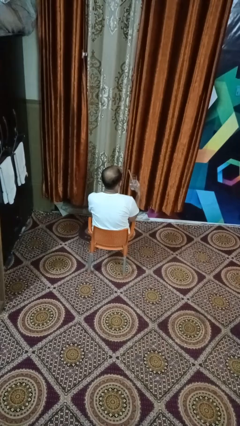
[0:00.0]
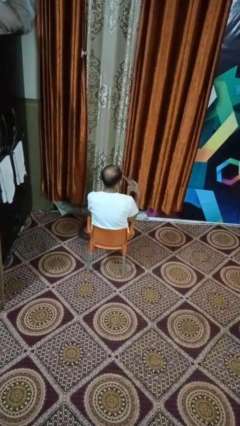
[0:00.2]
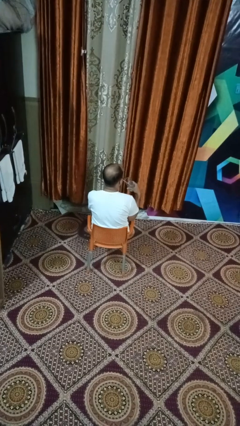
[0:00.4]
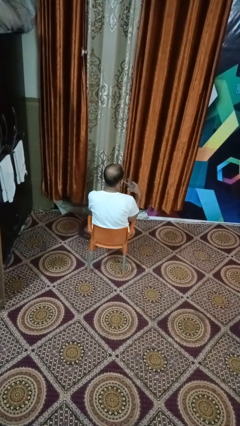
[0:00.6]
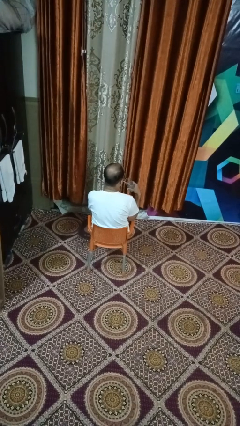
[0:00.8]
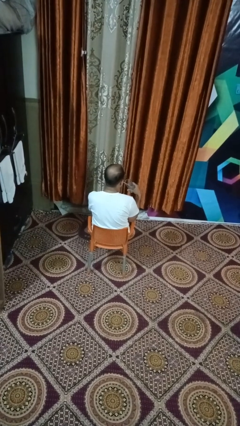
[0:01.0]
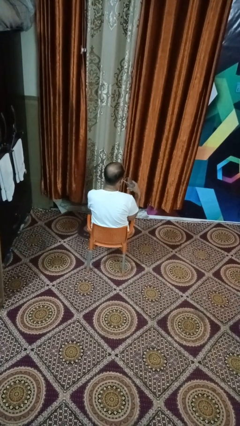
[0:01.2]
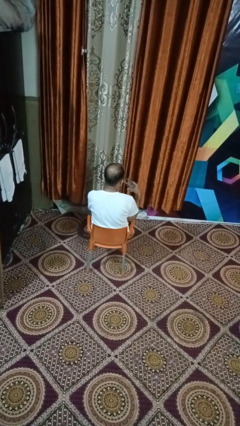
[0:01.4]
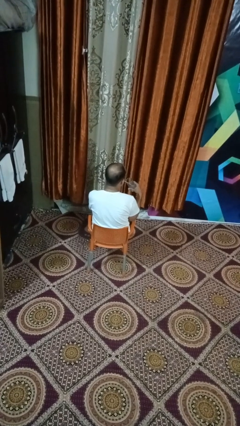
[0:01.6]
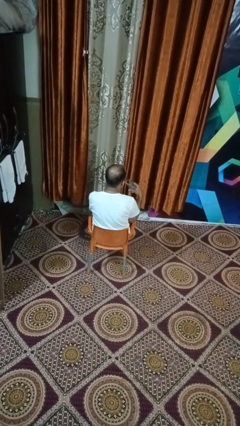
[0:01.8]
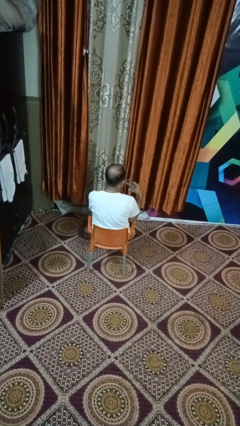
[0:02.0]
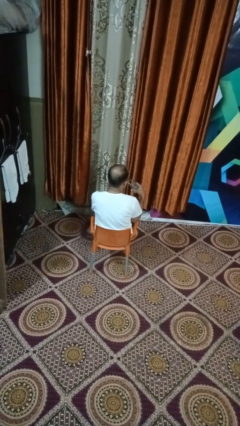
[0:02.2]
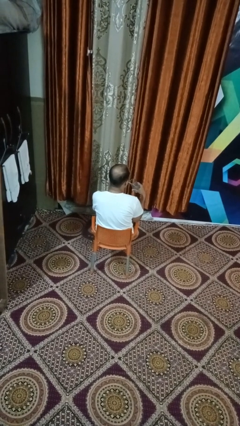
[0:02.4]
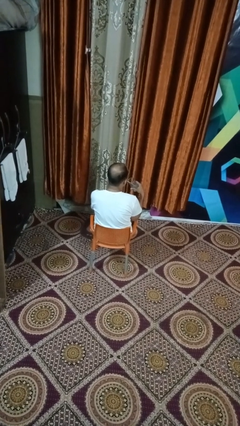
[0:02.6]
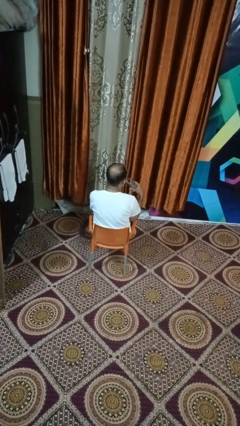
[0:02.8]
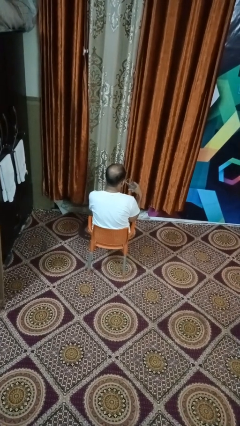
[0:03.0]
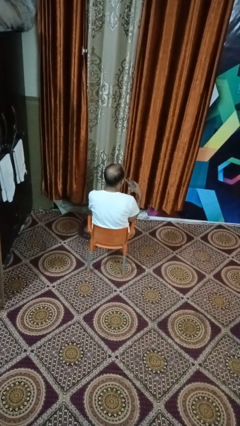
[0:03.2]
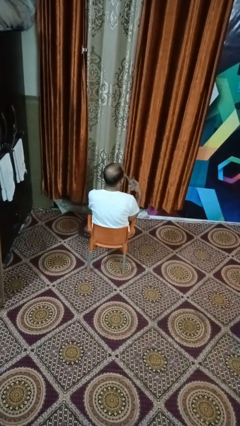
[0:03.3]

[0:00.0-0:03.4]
person drinks from straw

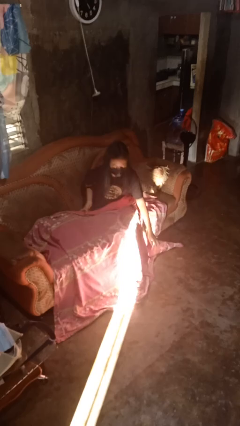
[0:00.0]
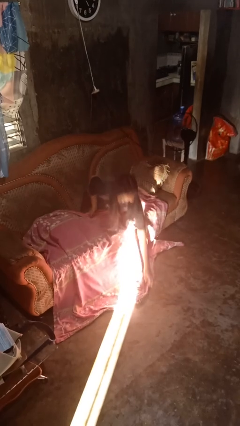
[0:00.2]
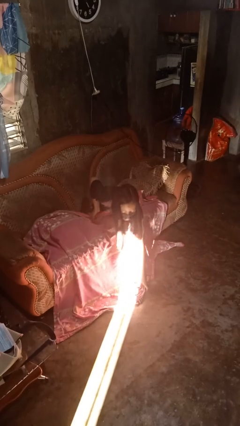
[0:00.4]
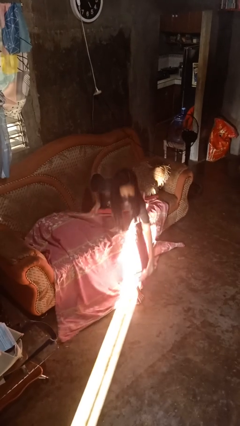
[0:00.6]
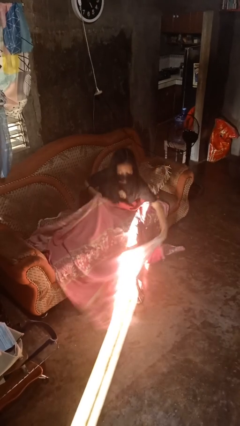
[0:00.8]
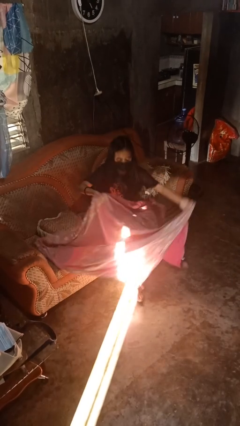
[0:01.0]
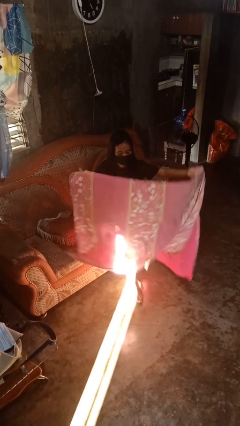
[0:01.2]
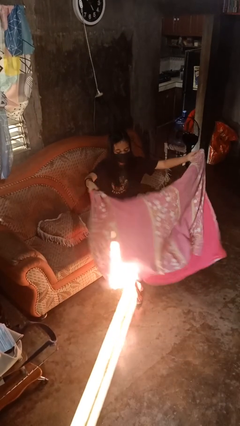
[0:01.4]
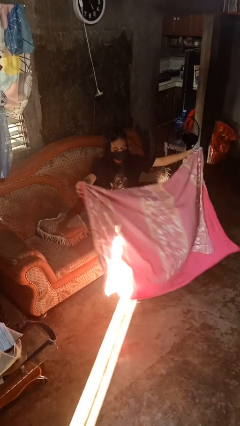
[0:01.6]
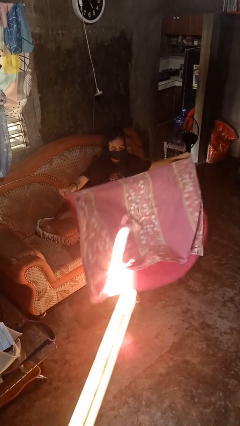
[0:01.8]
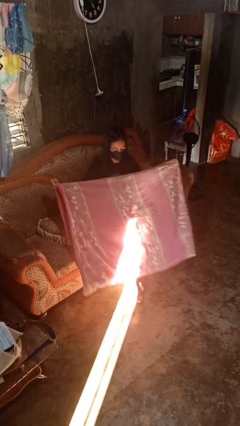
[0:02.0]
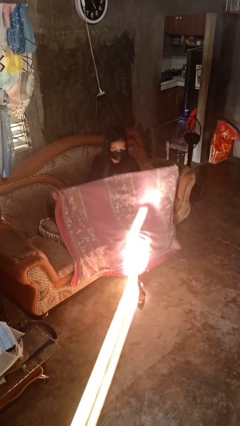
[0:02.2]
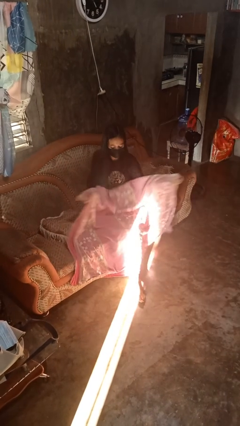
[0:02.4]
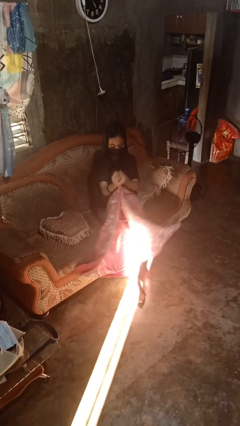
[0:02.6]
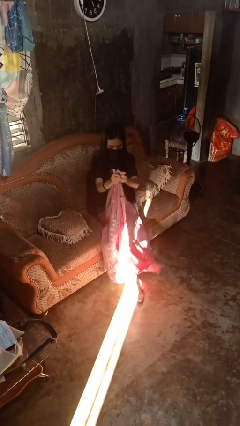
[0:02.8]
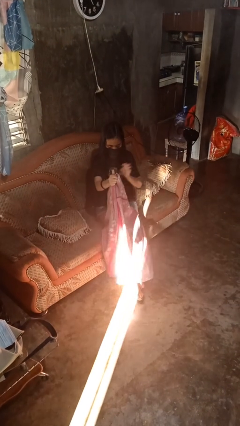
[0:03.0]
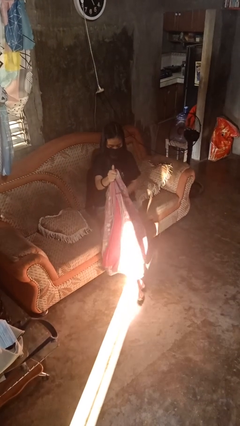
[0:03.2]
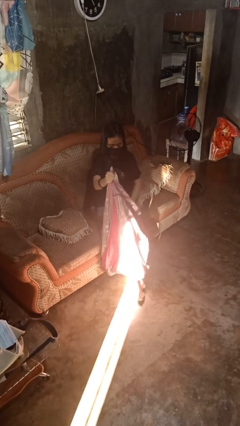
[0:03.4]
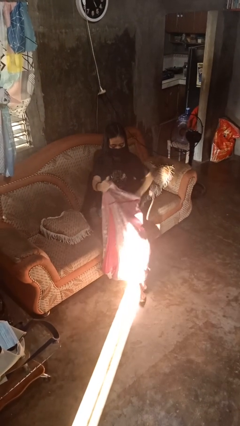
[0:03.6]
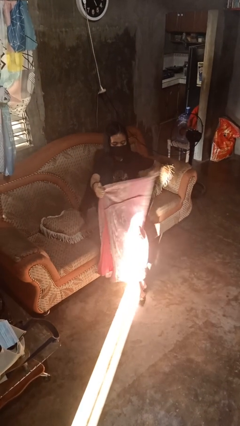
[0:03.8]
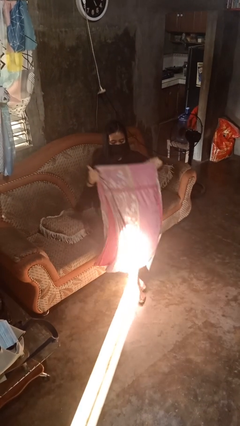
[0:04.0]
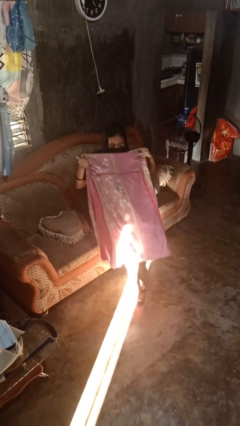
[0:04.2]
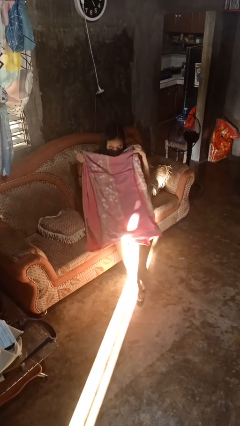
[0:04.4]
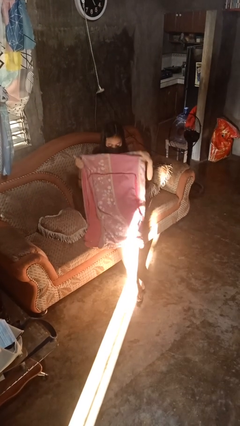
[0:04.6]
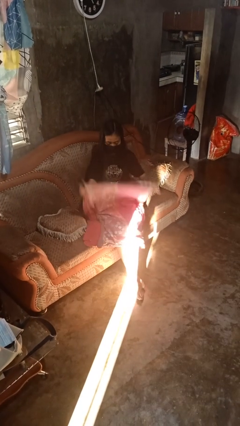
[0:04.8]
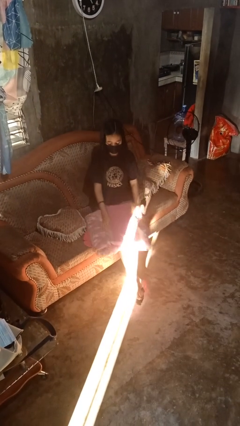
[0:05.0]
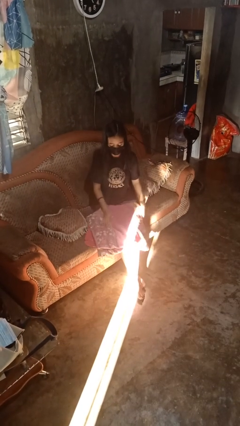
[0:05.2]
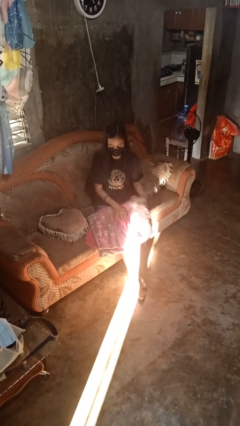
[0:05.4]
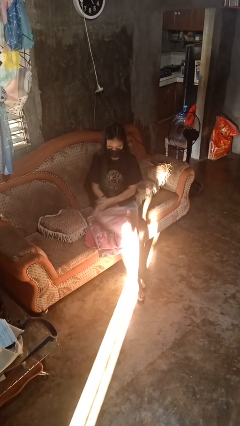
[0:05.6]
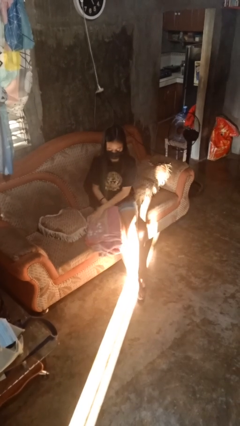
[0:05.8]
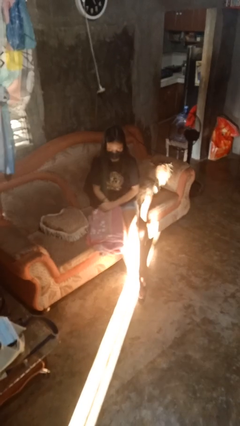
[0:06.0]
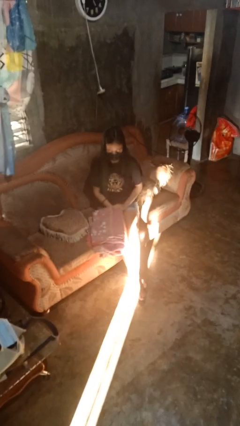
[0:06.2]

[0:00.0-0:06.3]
person folds blanket

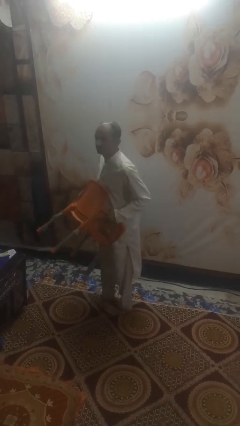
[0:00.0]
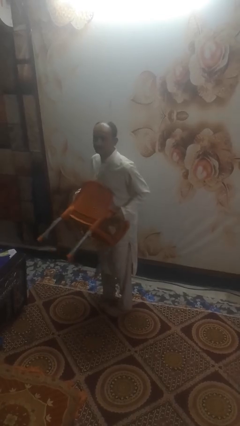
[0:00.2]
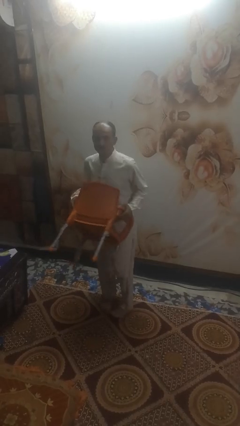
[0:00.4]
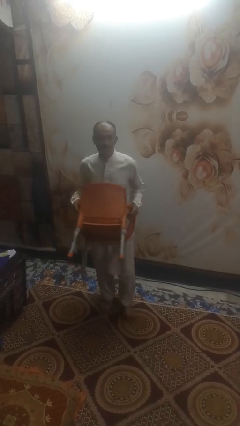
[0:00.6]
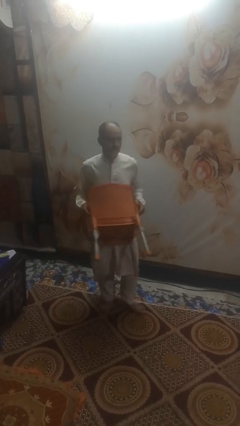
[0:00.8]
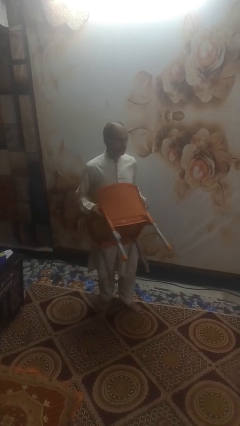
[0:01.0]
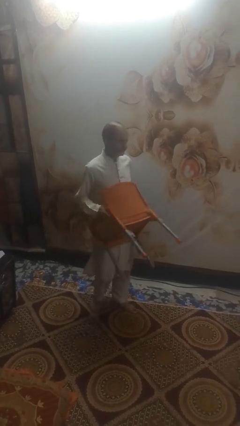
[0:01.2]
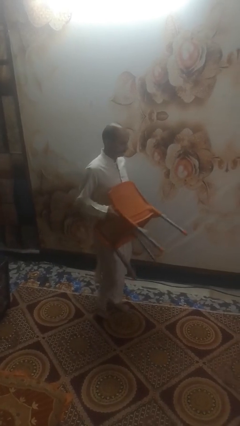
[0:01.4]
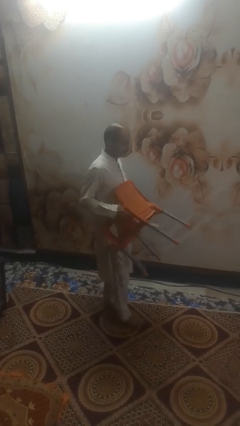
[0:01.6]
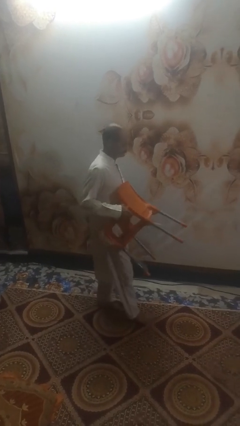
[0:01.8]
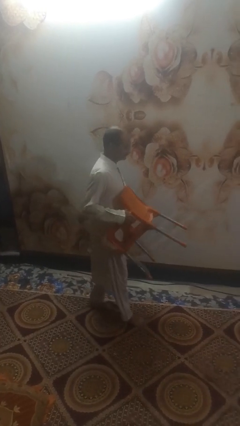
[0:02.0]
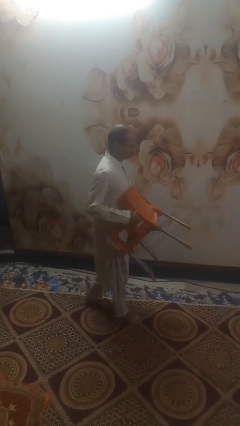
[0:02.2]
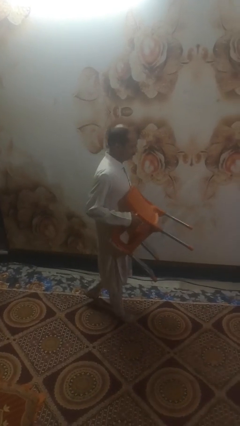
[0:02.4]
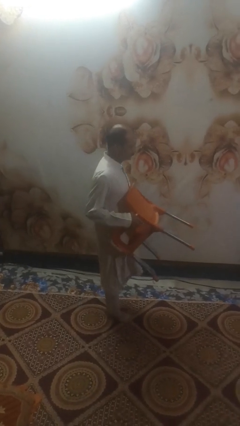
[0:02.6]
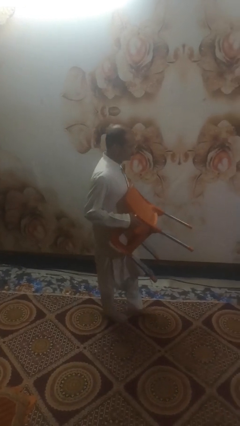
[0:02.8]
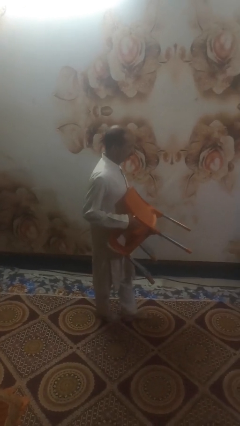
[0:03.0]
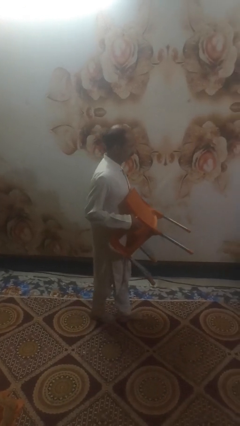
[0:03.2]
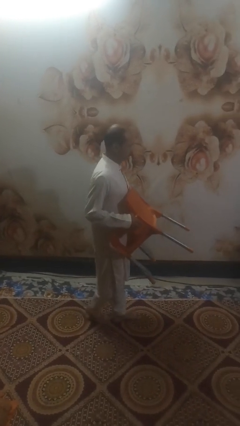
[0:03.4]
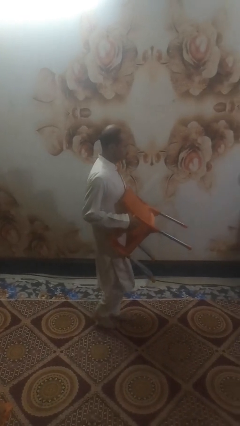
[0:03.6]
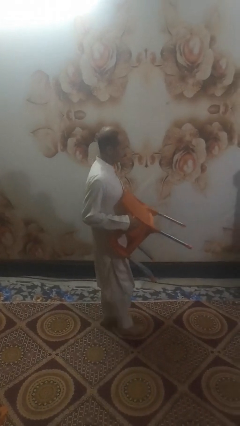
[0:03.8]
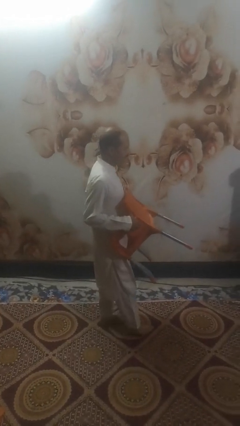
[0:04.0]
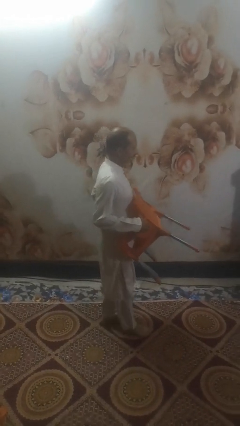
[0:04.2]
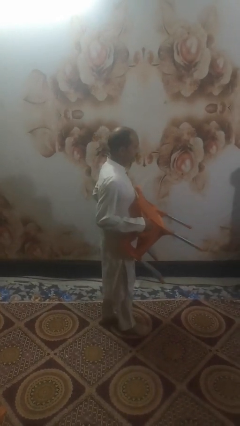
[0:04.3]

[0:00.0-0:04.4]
person carries furniture

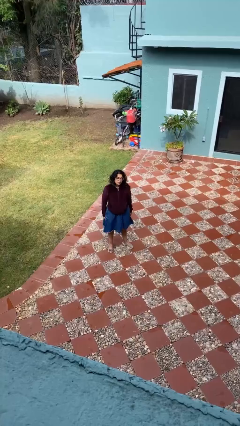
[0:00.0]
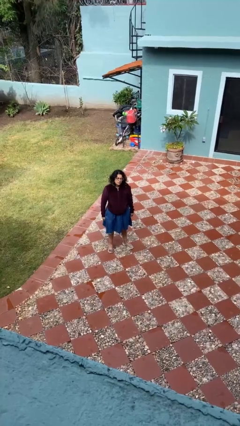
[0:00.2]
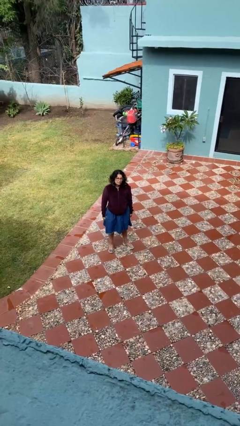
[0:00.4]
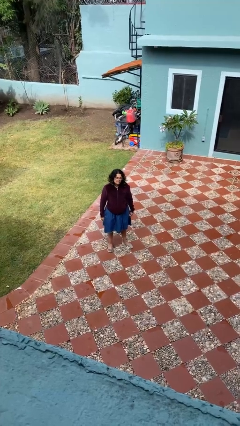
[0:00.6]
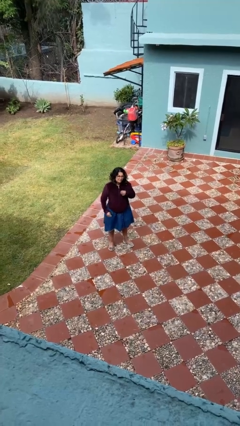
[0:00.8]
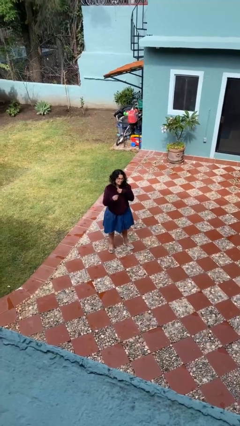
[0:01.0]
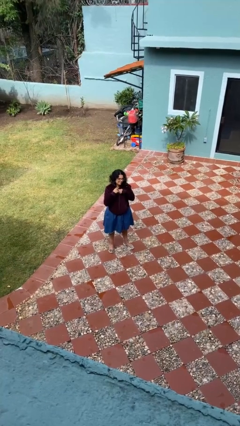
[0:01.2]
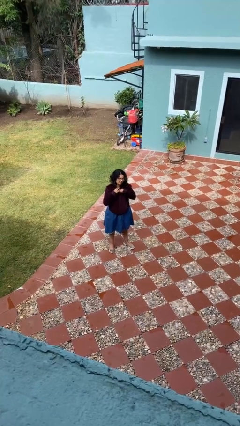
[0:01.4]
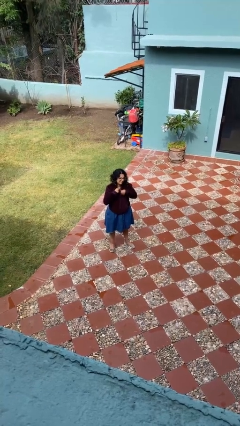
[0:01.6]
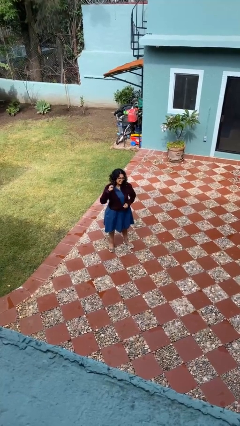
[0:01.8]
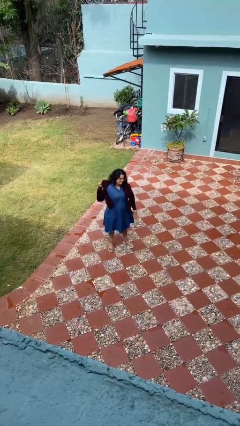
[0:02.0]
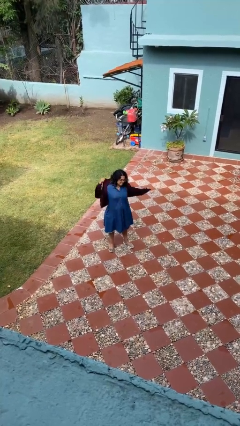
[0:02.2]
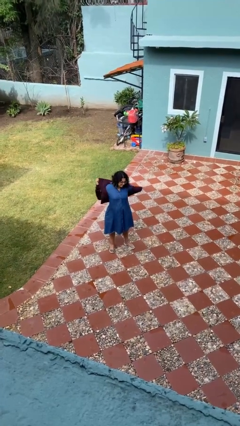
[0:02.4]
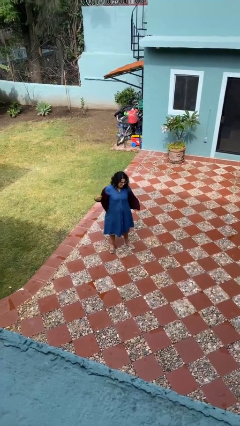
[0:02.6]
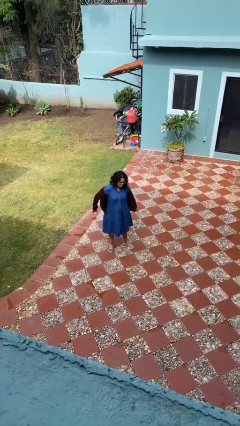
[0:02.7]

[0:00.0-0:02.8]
person unzips jacket

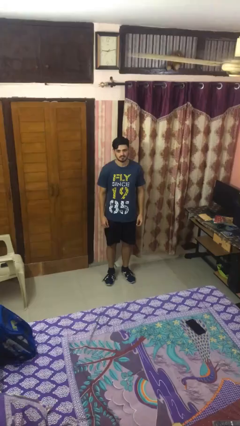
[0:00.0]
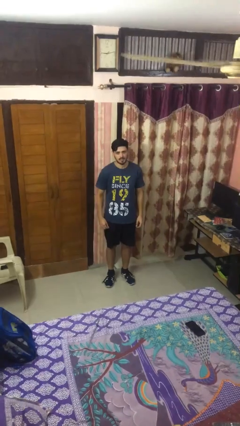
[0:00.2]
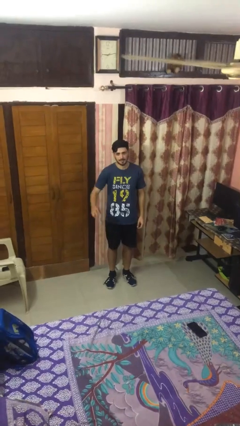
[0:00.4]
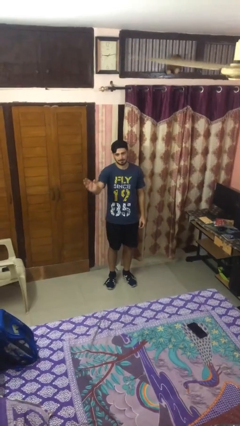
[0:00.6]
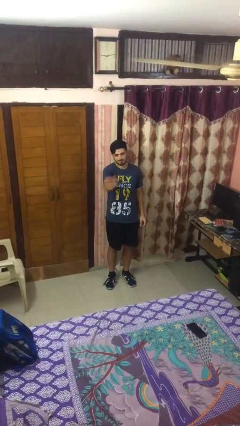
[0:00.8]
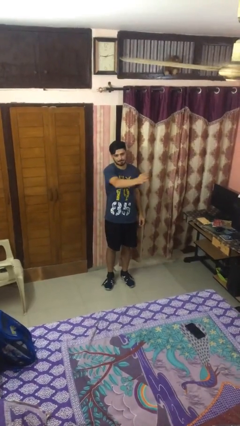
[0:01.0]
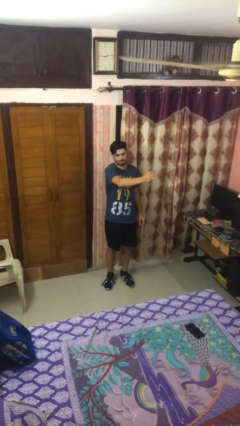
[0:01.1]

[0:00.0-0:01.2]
person gestures swipe left
